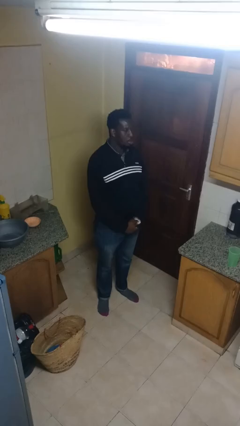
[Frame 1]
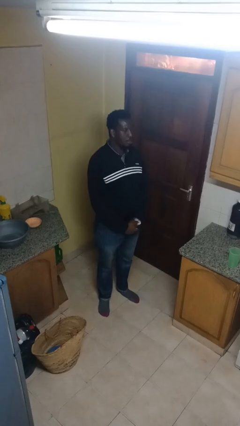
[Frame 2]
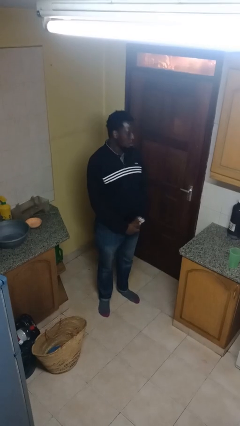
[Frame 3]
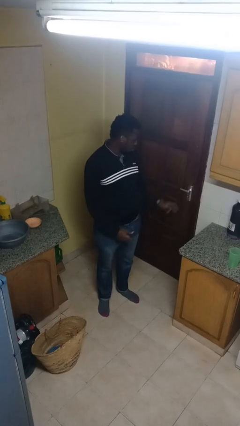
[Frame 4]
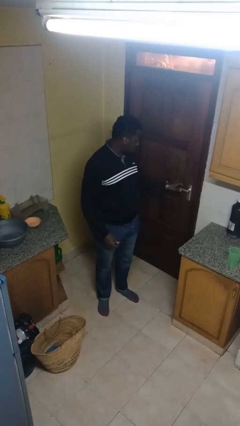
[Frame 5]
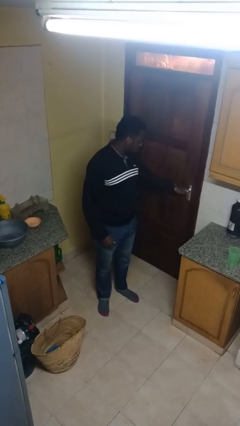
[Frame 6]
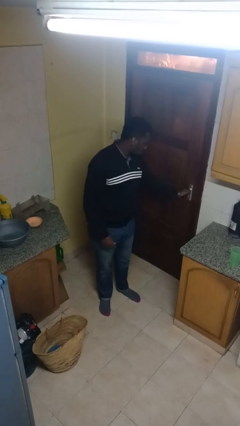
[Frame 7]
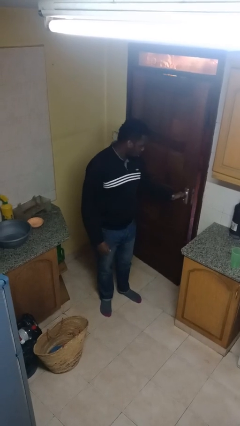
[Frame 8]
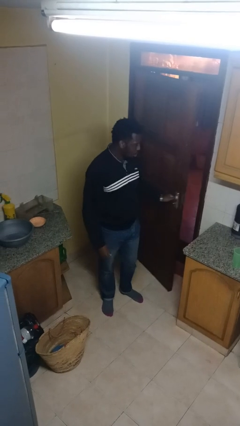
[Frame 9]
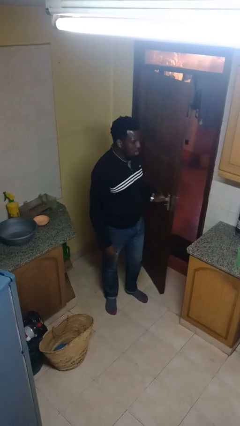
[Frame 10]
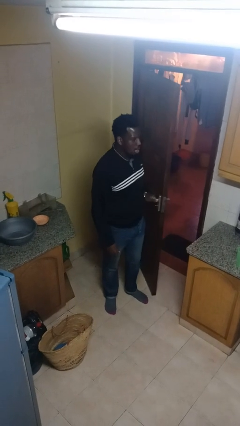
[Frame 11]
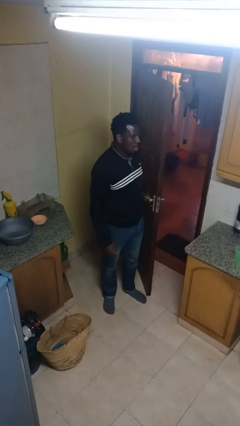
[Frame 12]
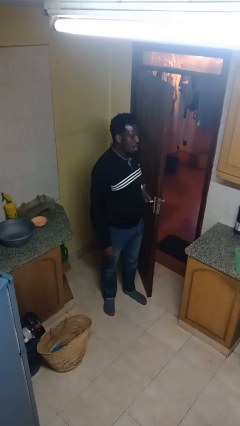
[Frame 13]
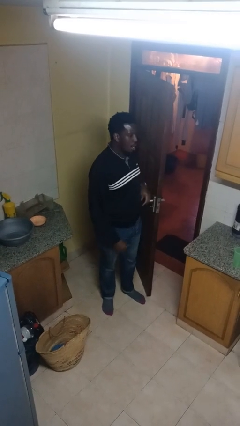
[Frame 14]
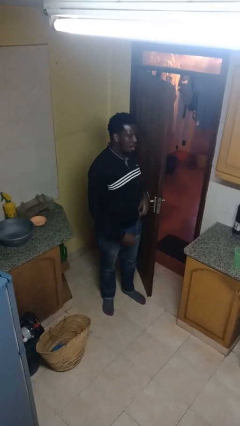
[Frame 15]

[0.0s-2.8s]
person opens facility door

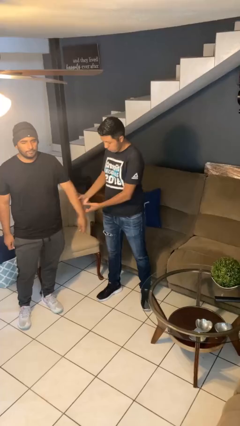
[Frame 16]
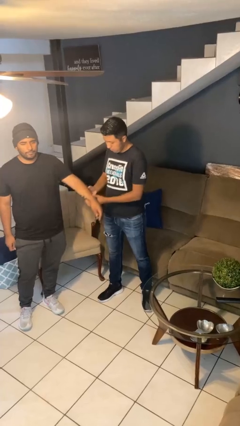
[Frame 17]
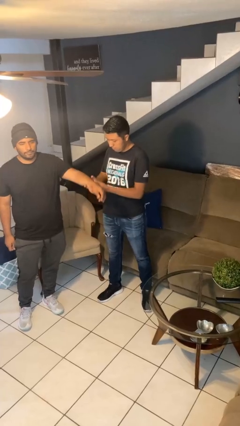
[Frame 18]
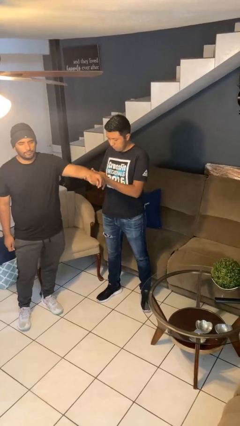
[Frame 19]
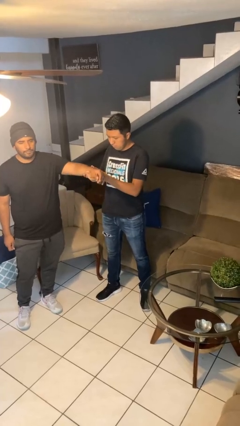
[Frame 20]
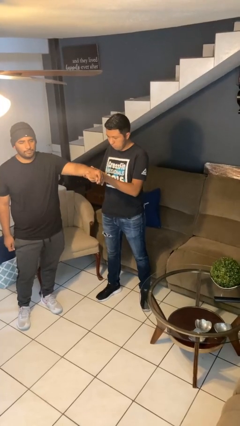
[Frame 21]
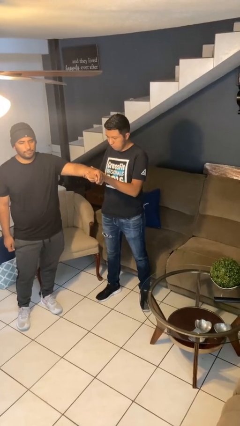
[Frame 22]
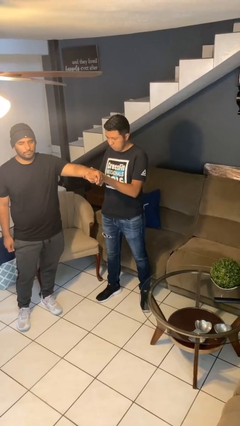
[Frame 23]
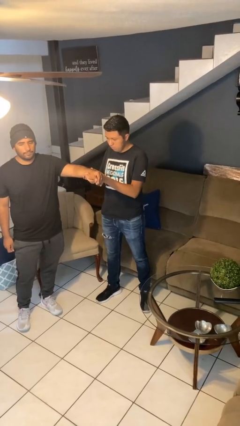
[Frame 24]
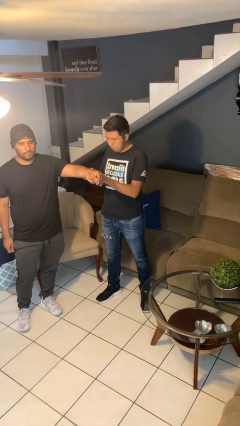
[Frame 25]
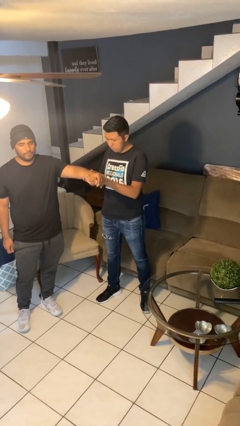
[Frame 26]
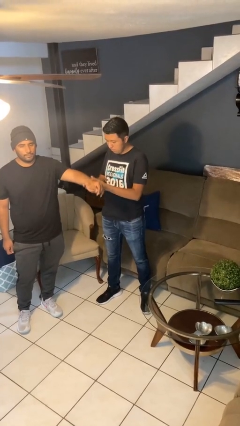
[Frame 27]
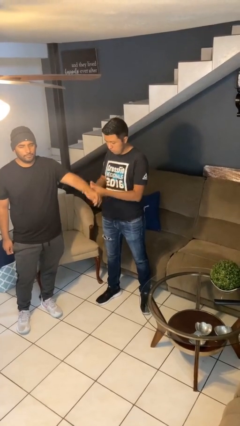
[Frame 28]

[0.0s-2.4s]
person grabs person by forearm

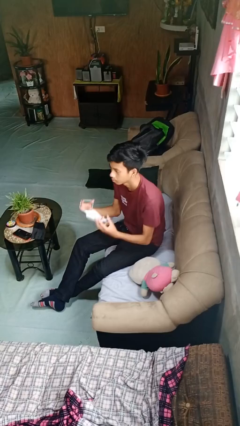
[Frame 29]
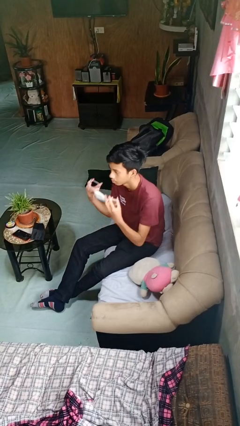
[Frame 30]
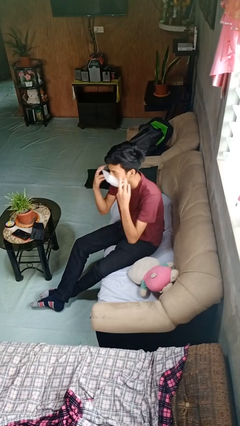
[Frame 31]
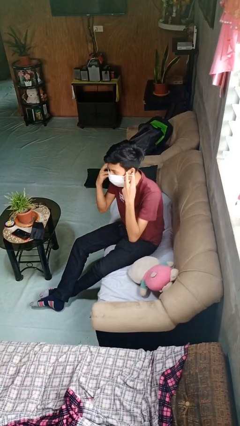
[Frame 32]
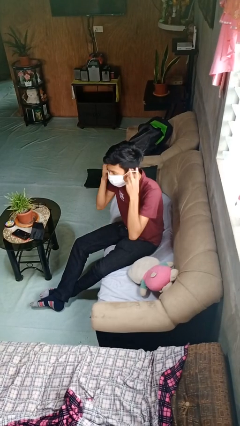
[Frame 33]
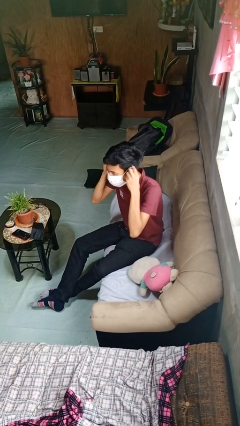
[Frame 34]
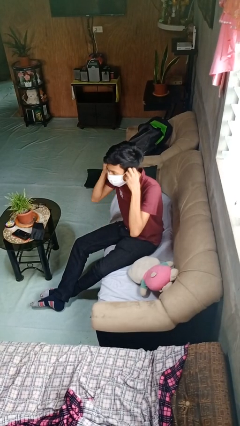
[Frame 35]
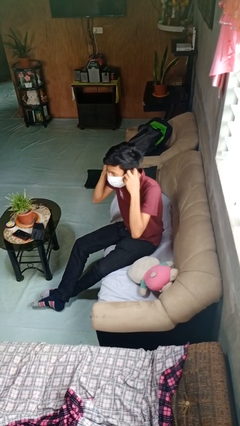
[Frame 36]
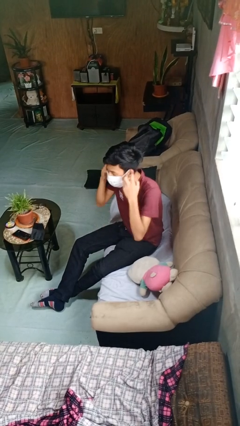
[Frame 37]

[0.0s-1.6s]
person puts on facemask

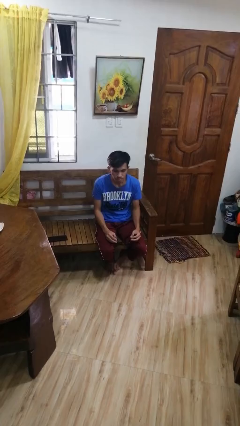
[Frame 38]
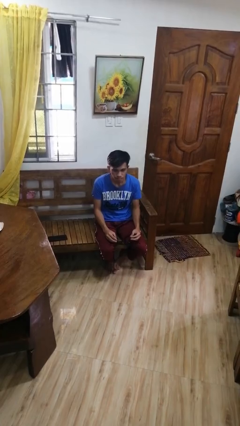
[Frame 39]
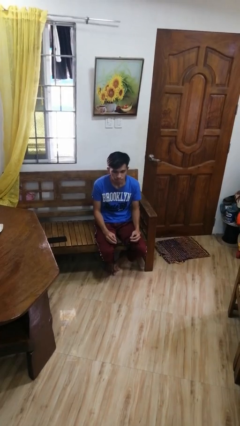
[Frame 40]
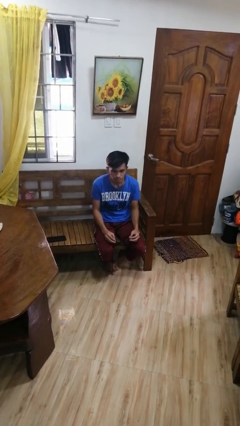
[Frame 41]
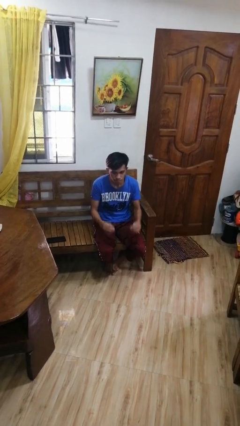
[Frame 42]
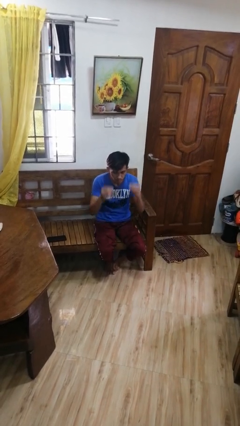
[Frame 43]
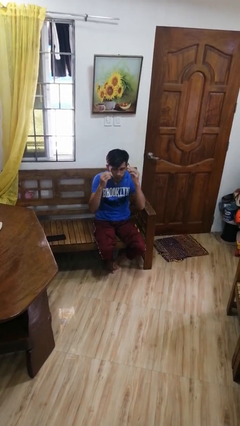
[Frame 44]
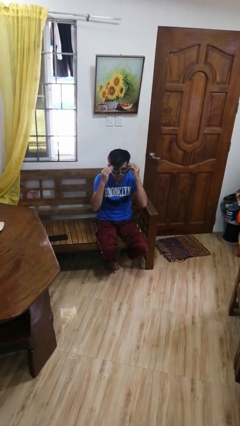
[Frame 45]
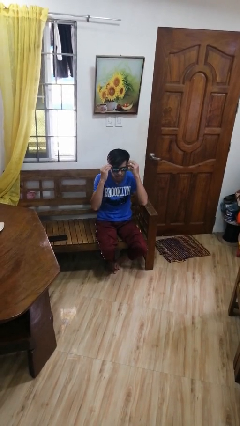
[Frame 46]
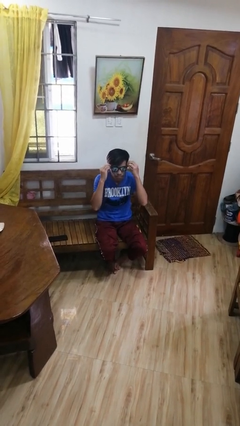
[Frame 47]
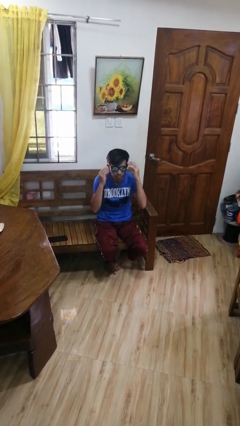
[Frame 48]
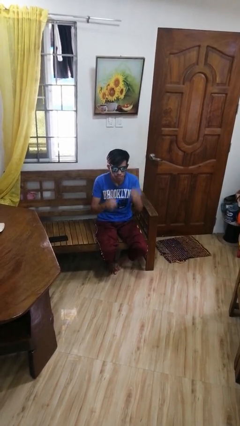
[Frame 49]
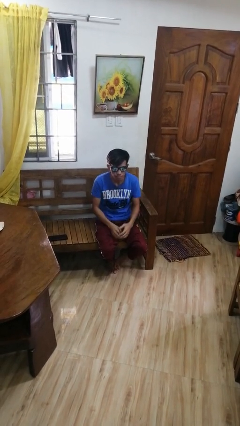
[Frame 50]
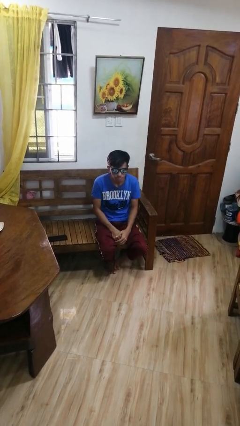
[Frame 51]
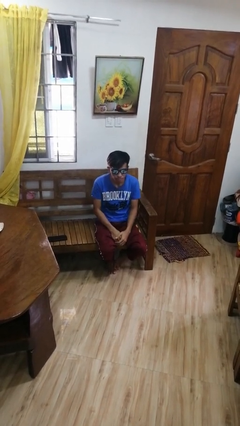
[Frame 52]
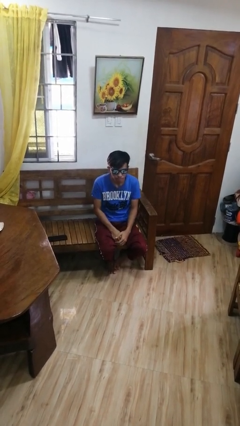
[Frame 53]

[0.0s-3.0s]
person puts on sunglasses

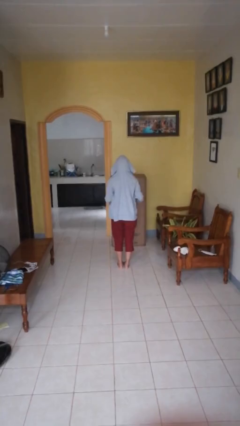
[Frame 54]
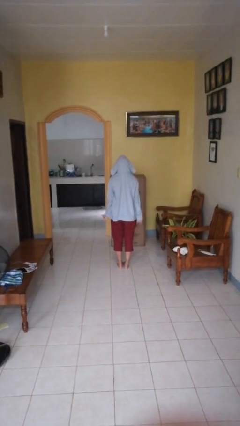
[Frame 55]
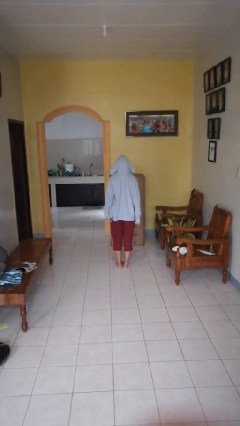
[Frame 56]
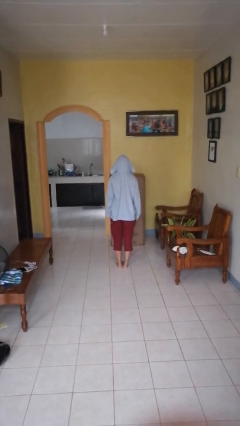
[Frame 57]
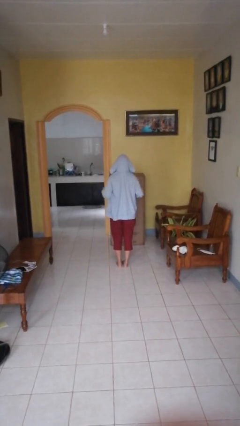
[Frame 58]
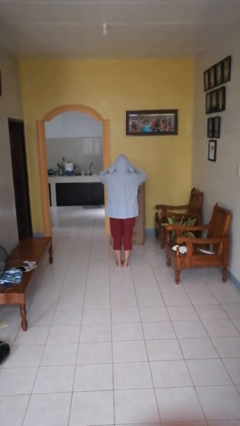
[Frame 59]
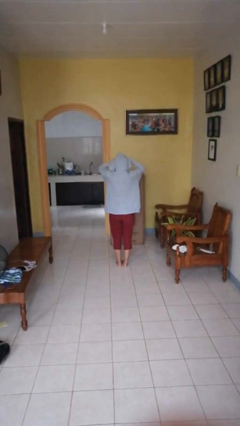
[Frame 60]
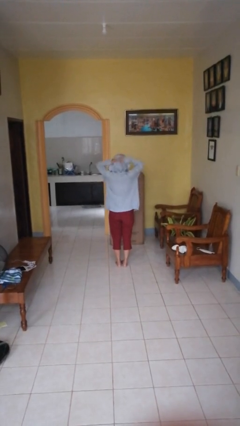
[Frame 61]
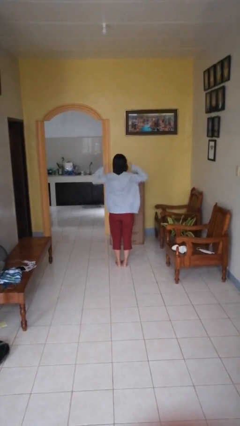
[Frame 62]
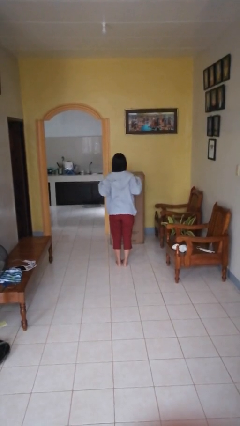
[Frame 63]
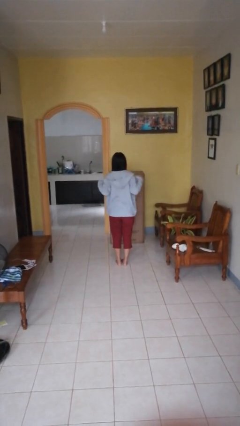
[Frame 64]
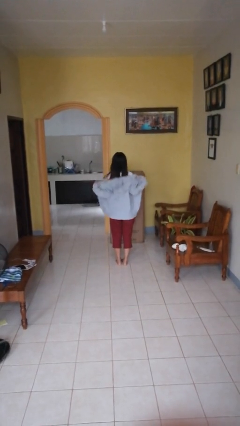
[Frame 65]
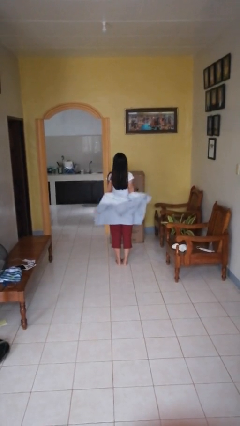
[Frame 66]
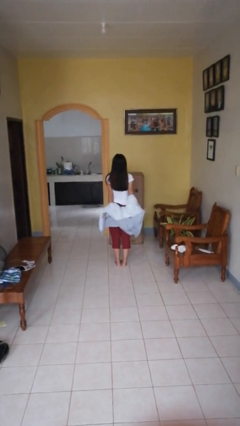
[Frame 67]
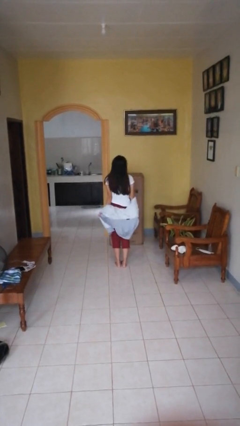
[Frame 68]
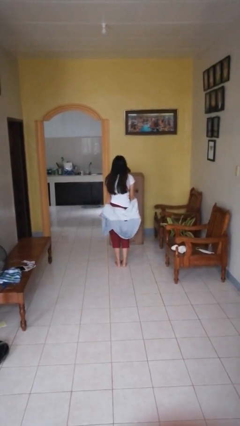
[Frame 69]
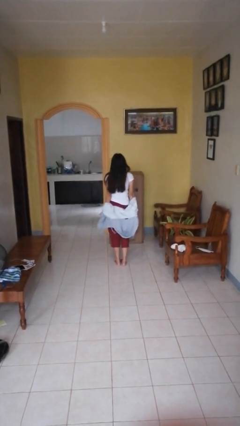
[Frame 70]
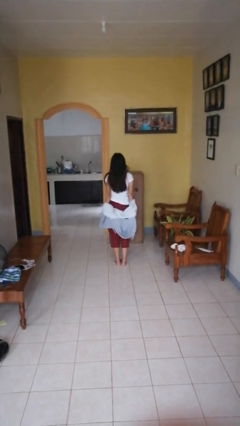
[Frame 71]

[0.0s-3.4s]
person takes off hoodie

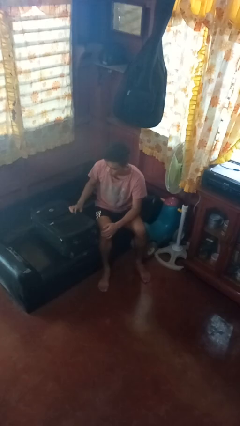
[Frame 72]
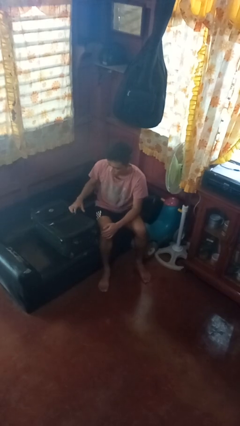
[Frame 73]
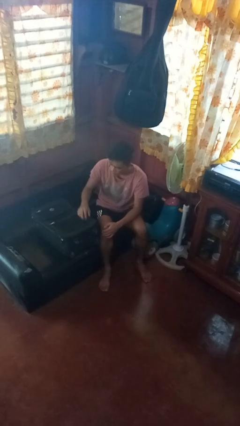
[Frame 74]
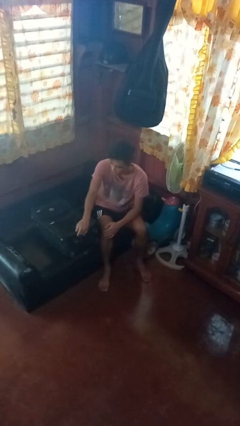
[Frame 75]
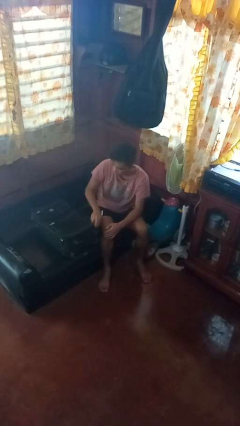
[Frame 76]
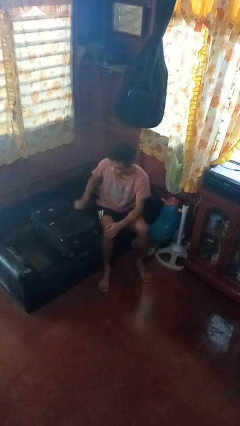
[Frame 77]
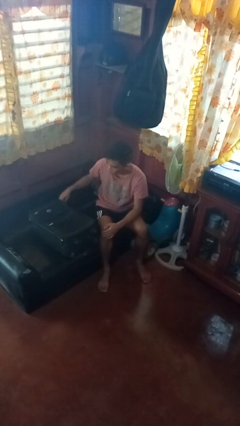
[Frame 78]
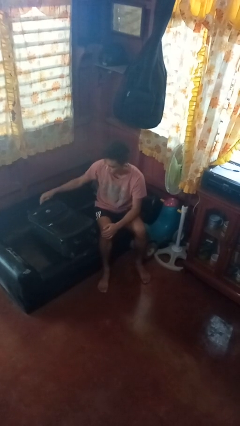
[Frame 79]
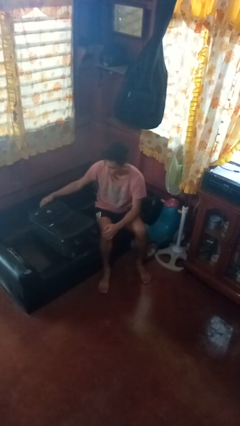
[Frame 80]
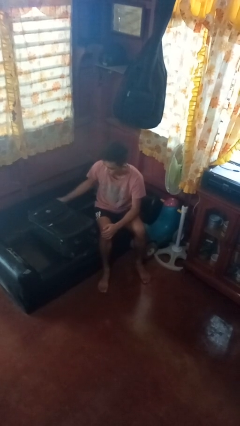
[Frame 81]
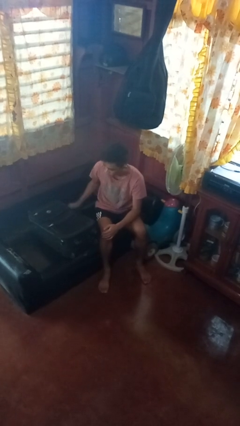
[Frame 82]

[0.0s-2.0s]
person closes suitcase

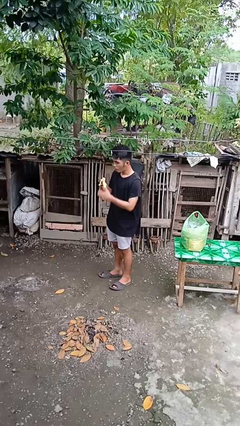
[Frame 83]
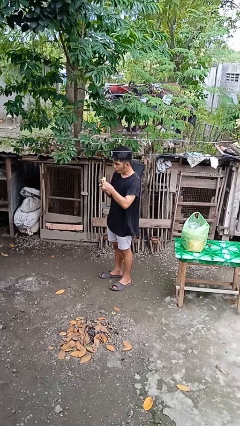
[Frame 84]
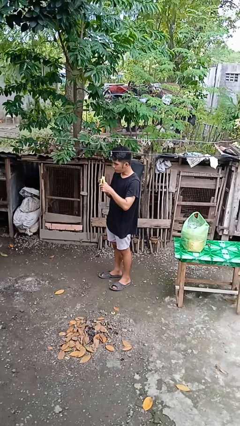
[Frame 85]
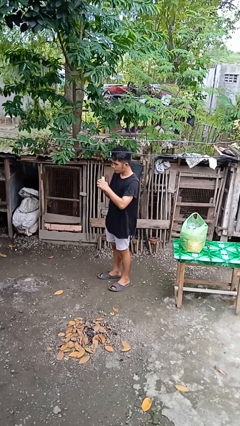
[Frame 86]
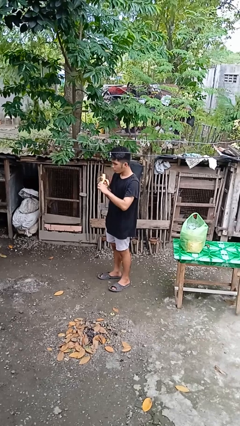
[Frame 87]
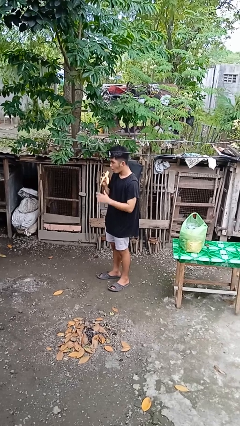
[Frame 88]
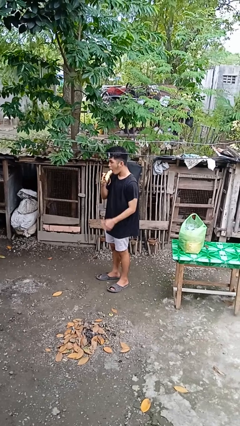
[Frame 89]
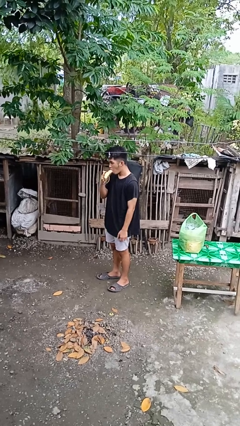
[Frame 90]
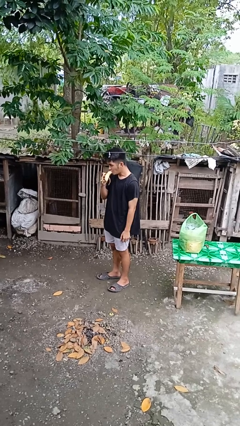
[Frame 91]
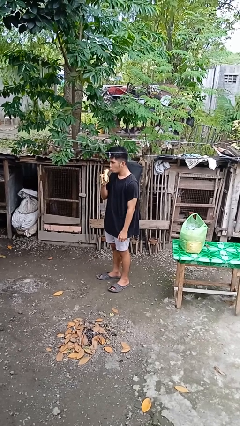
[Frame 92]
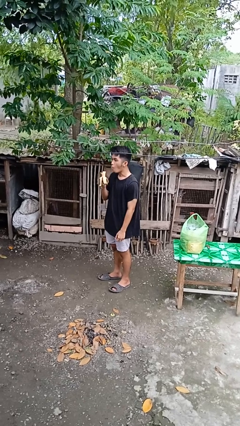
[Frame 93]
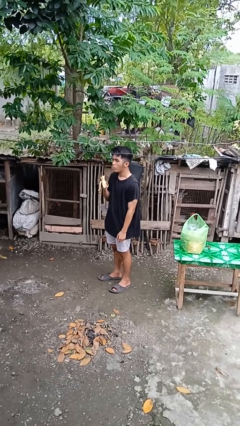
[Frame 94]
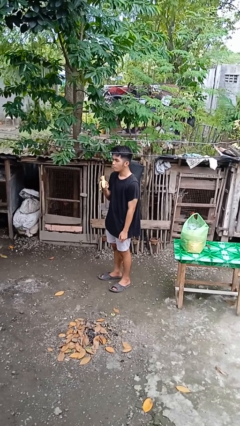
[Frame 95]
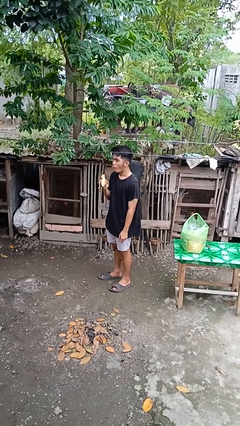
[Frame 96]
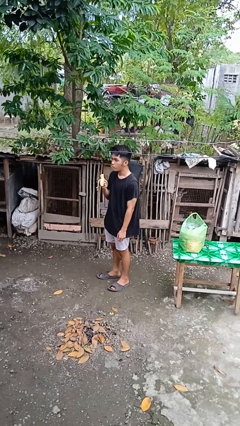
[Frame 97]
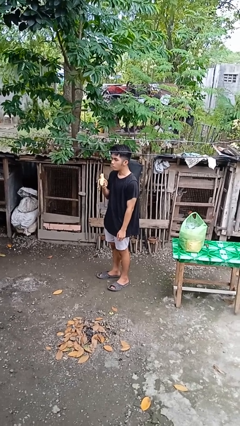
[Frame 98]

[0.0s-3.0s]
person eats banana
